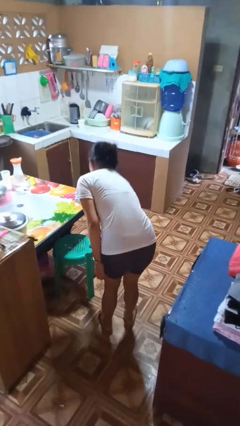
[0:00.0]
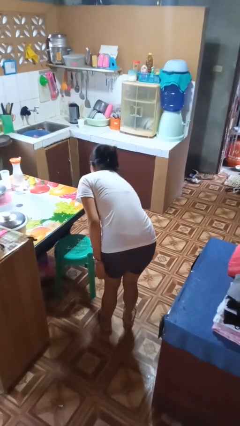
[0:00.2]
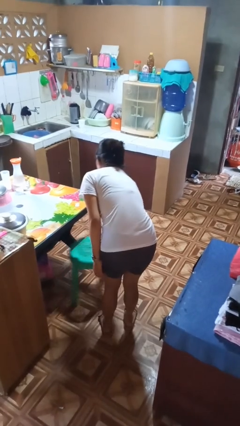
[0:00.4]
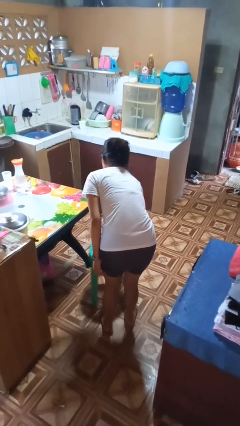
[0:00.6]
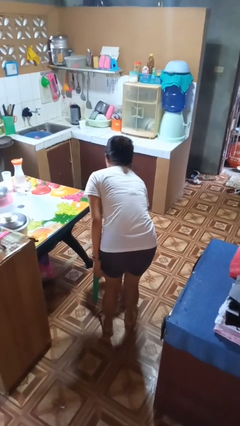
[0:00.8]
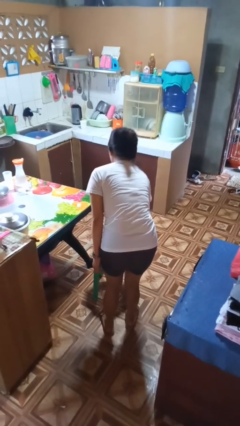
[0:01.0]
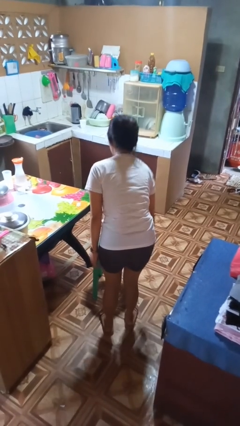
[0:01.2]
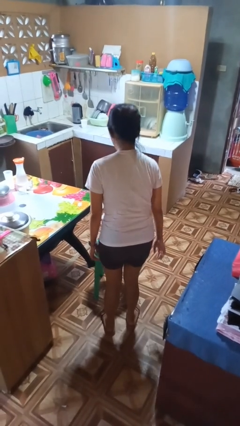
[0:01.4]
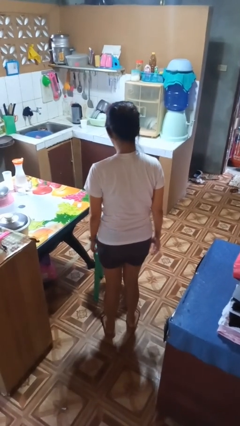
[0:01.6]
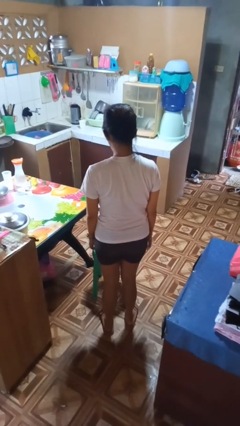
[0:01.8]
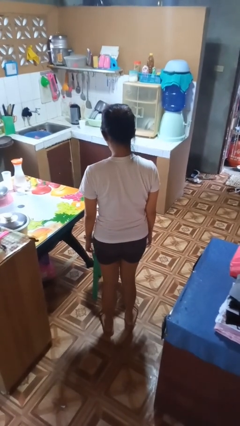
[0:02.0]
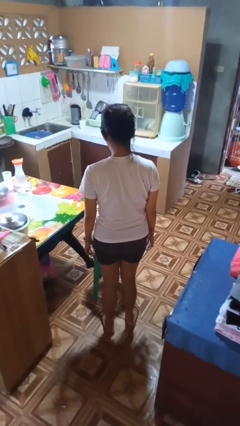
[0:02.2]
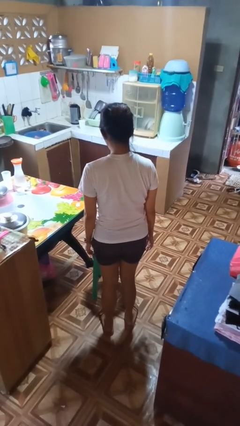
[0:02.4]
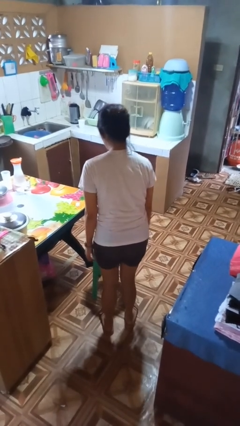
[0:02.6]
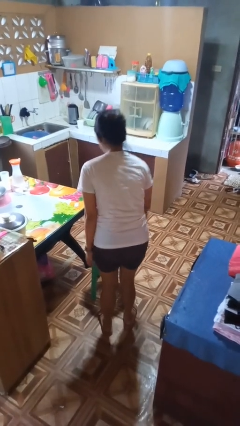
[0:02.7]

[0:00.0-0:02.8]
person pulls out chair

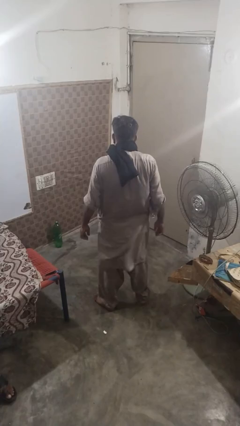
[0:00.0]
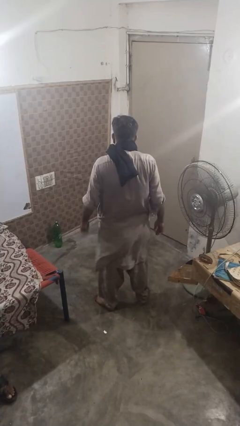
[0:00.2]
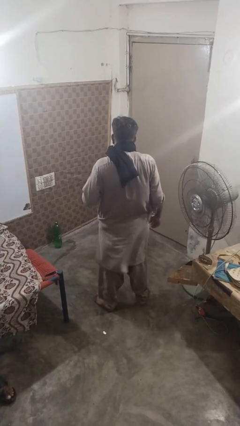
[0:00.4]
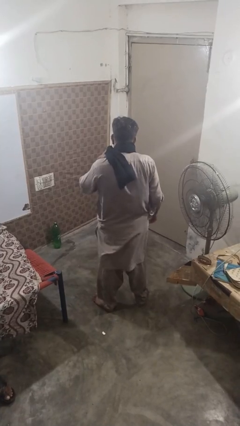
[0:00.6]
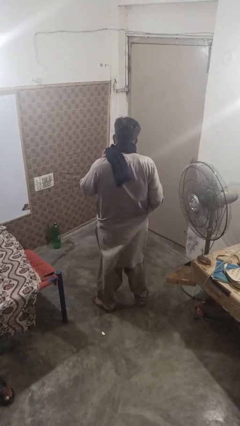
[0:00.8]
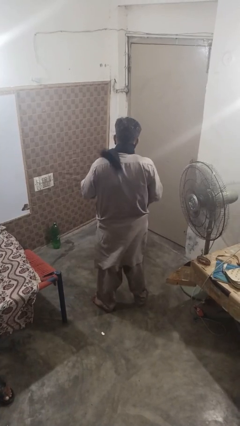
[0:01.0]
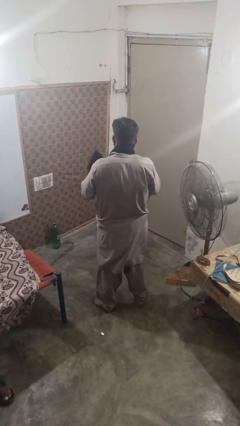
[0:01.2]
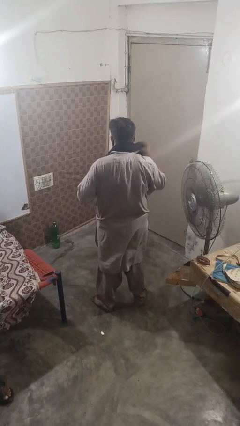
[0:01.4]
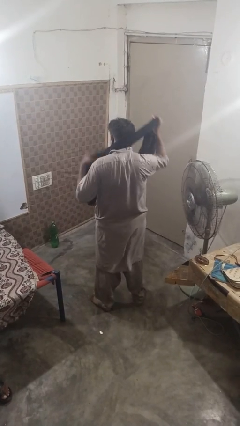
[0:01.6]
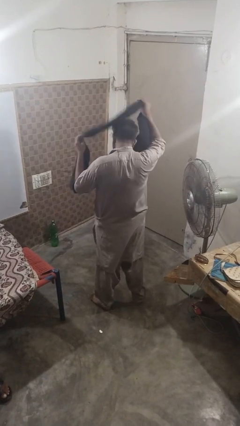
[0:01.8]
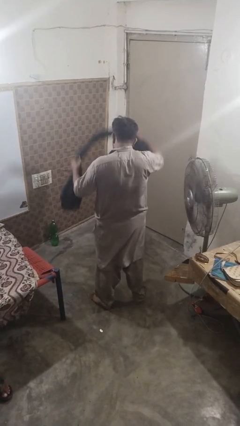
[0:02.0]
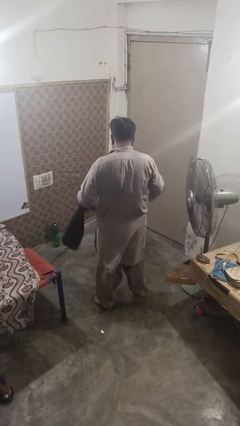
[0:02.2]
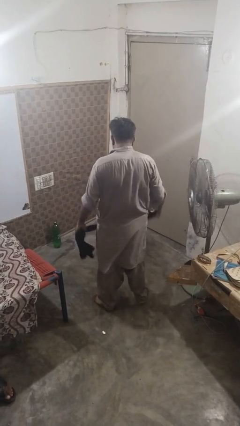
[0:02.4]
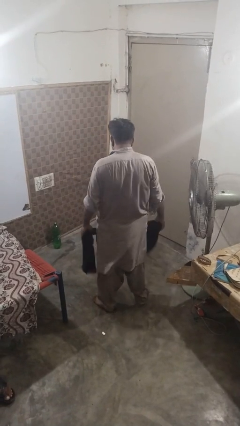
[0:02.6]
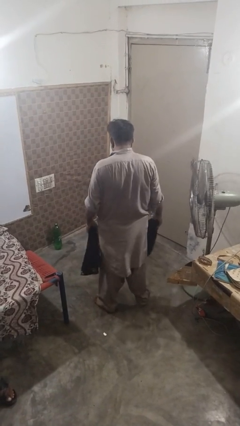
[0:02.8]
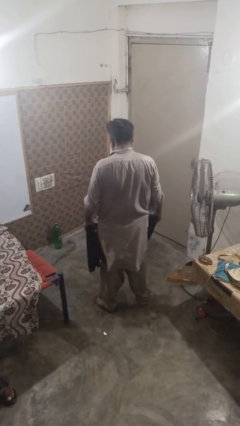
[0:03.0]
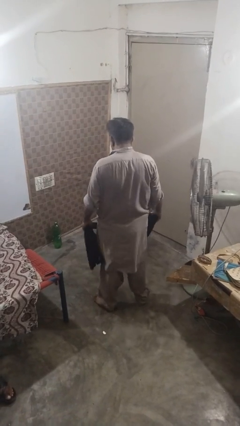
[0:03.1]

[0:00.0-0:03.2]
person takes off scarf

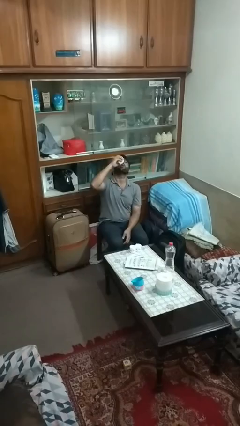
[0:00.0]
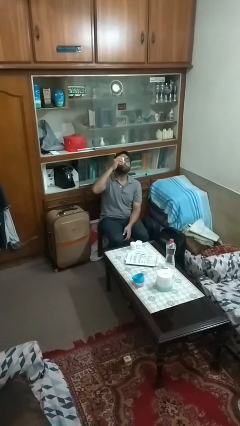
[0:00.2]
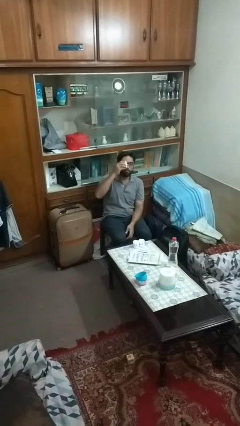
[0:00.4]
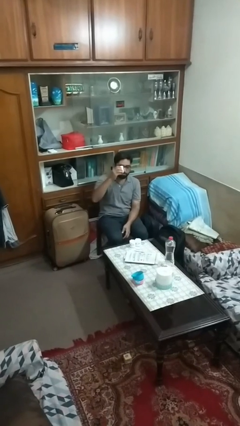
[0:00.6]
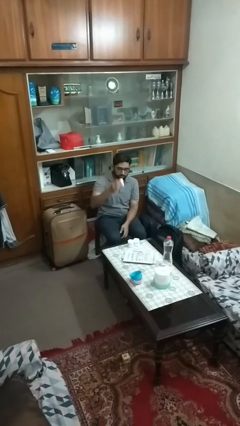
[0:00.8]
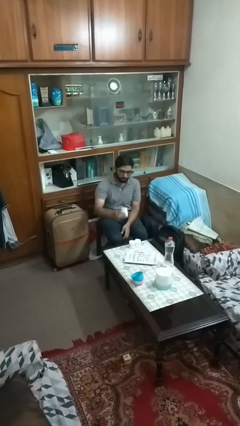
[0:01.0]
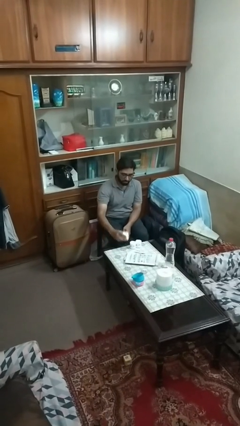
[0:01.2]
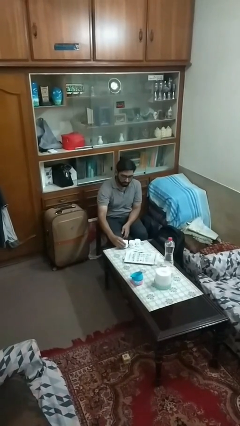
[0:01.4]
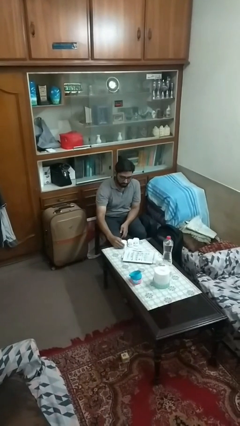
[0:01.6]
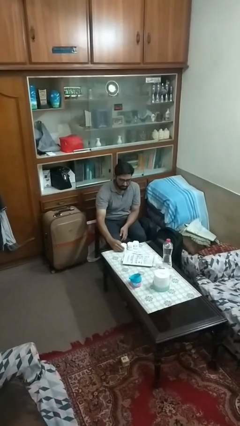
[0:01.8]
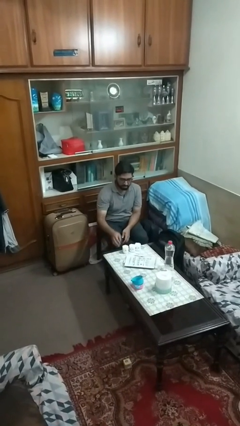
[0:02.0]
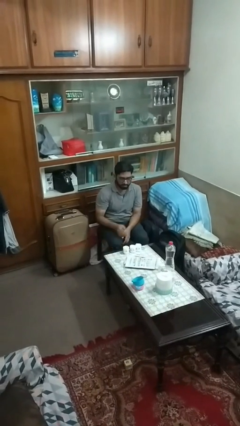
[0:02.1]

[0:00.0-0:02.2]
person puts down object on table

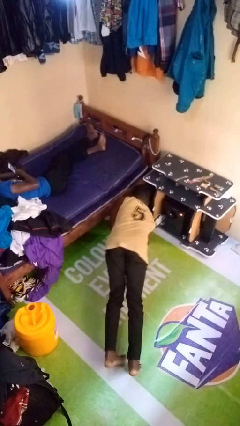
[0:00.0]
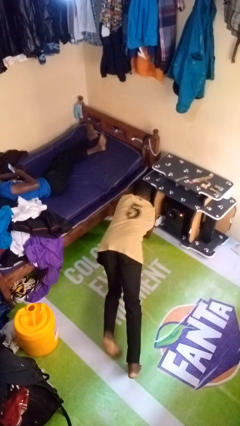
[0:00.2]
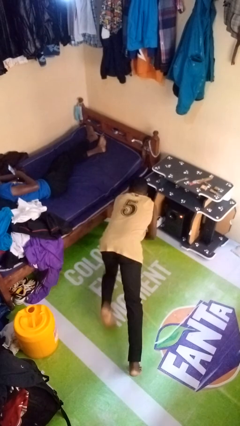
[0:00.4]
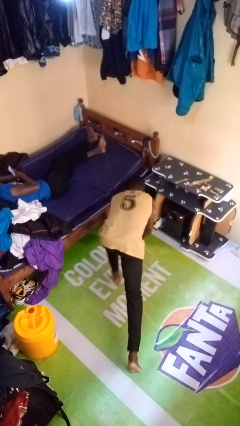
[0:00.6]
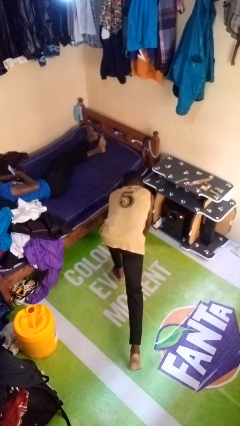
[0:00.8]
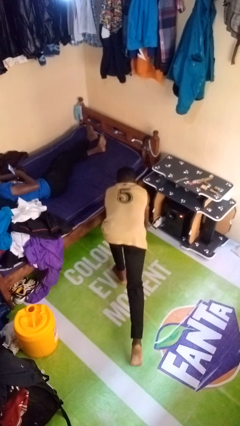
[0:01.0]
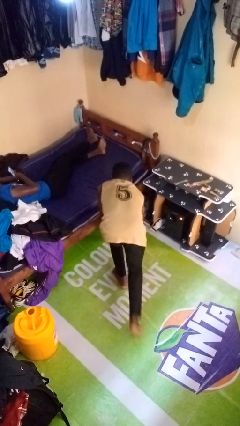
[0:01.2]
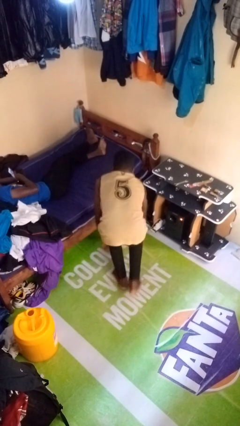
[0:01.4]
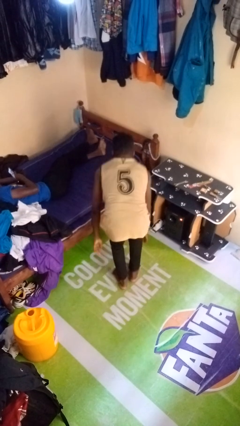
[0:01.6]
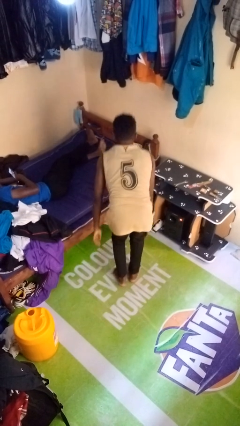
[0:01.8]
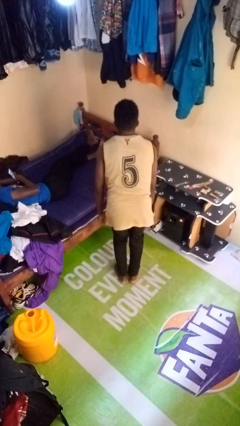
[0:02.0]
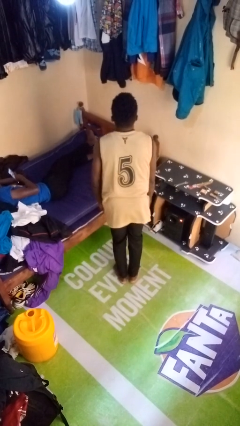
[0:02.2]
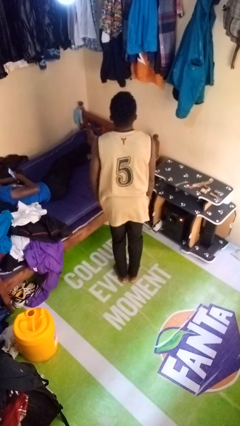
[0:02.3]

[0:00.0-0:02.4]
person stands up from floor

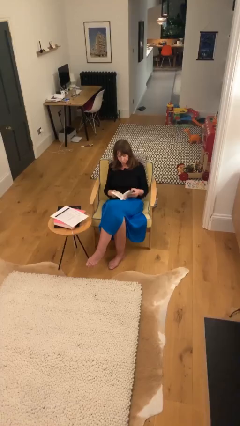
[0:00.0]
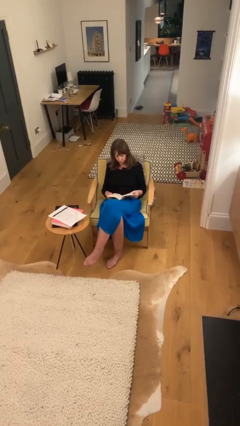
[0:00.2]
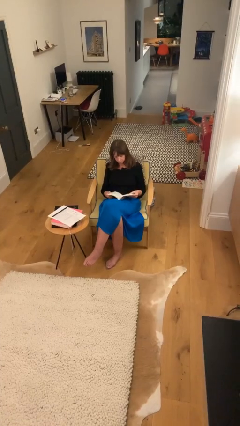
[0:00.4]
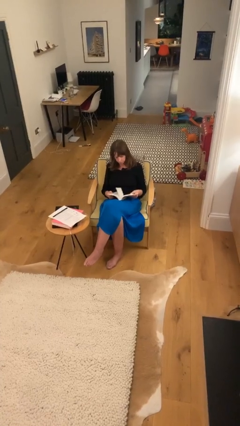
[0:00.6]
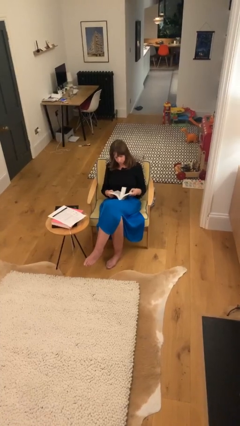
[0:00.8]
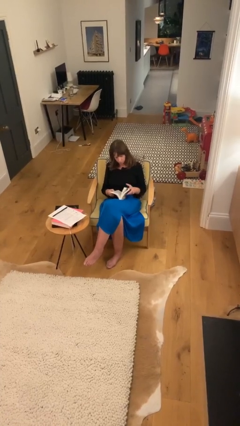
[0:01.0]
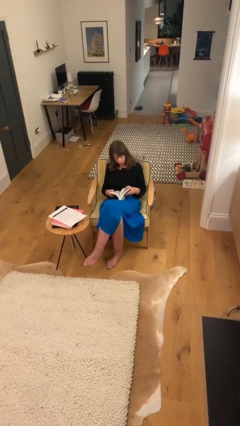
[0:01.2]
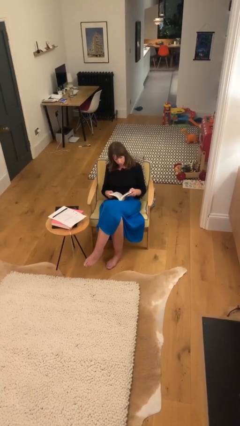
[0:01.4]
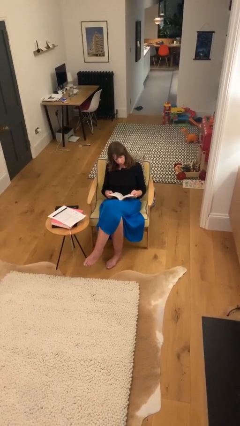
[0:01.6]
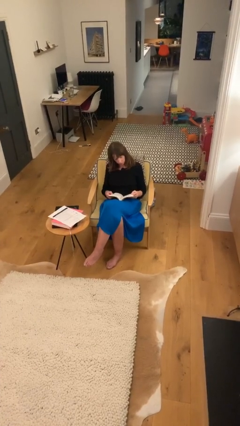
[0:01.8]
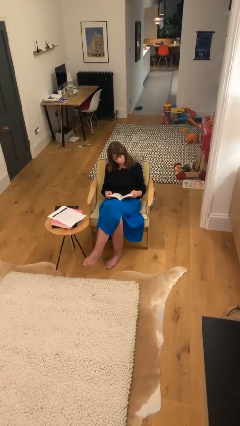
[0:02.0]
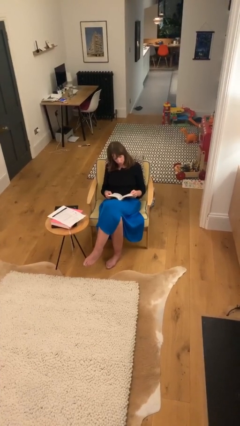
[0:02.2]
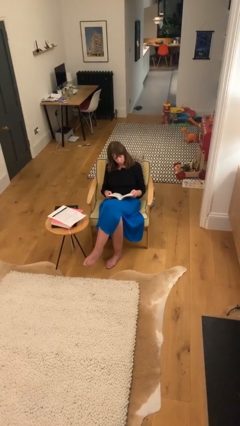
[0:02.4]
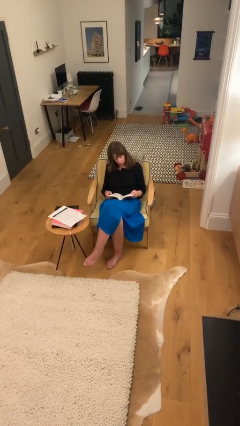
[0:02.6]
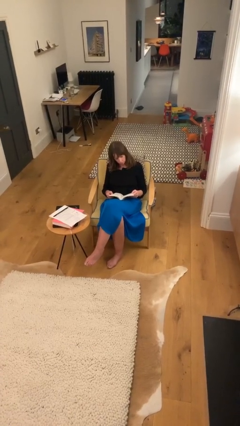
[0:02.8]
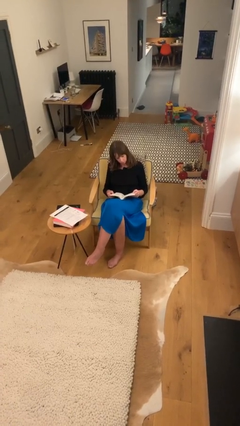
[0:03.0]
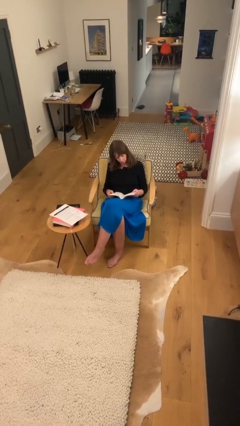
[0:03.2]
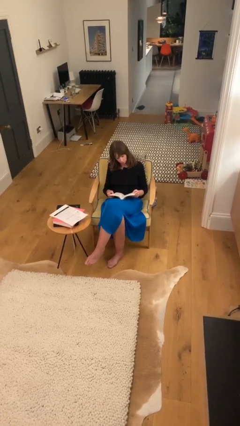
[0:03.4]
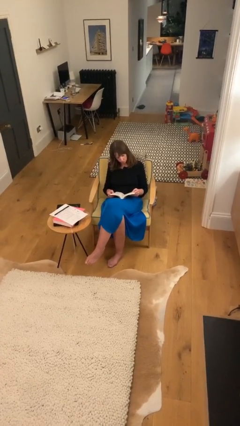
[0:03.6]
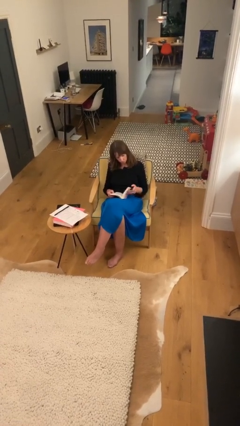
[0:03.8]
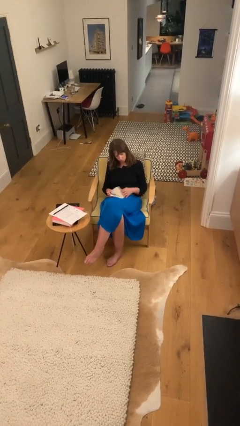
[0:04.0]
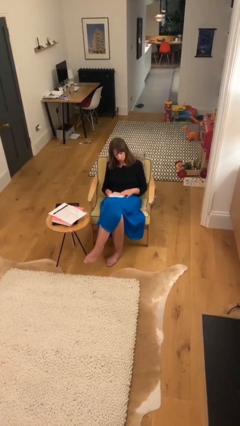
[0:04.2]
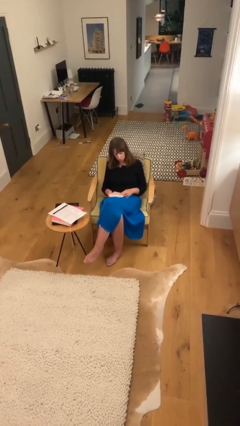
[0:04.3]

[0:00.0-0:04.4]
person reads document

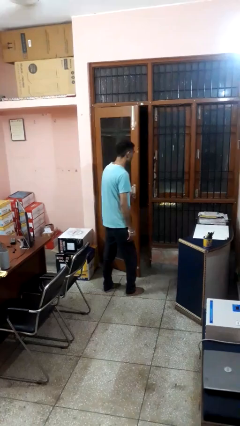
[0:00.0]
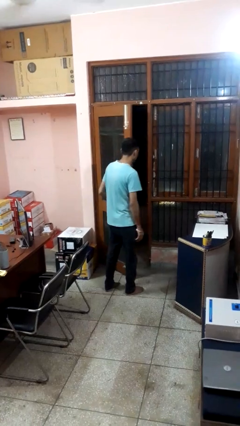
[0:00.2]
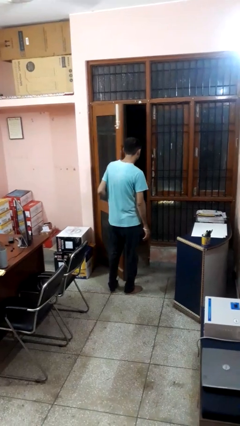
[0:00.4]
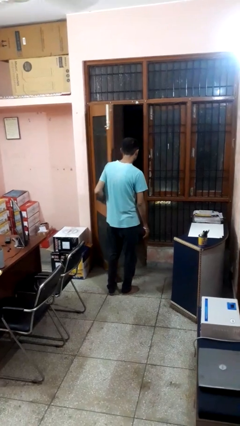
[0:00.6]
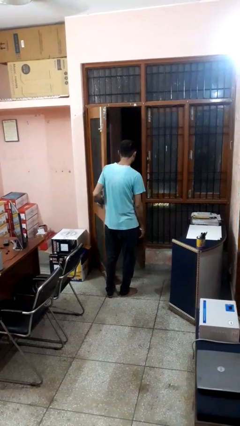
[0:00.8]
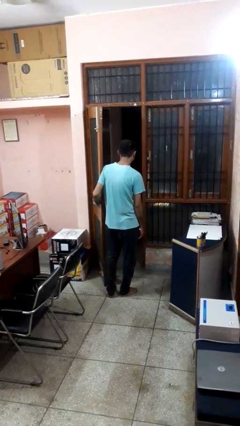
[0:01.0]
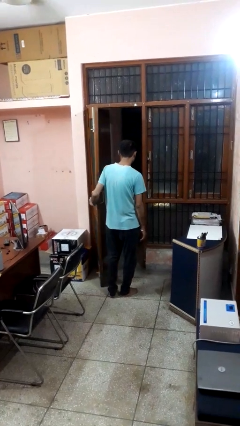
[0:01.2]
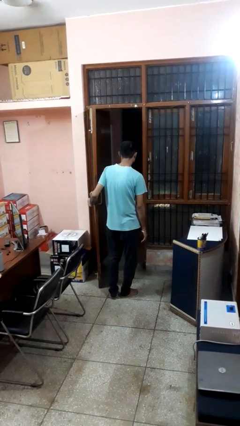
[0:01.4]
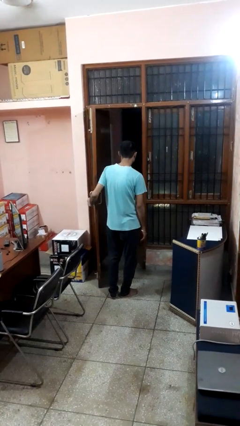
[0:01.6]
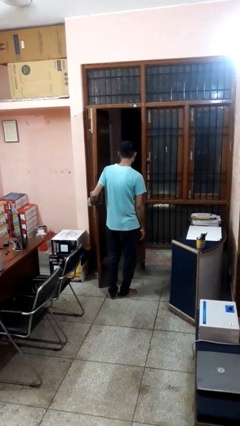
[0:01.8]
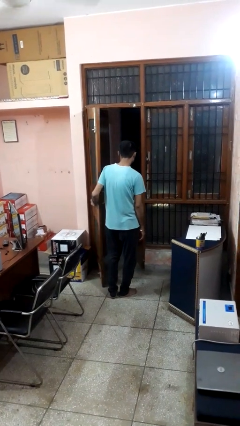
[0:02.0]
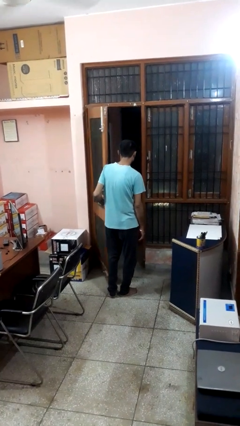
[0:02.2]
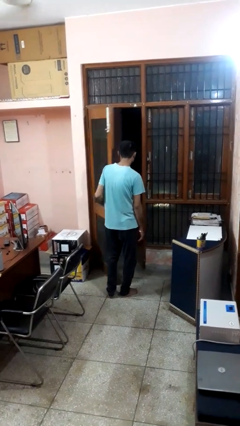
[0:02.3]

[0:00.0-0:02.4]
person opens facility door
